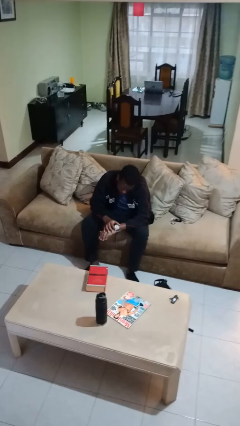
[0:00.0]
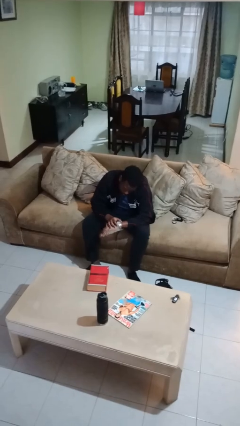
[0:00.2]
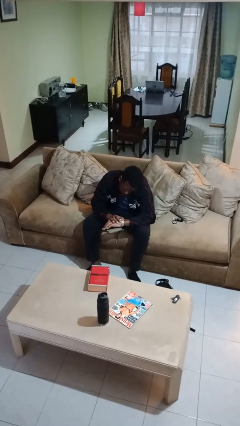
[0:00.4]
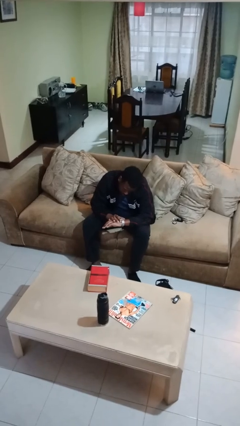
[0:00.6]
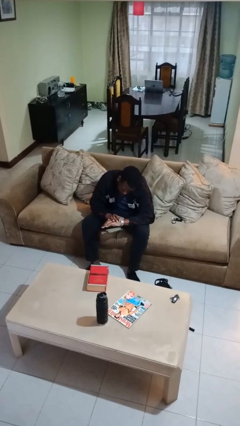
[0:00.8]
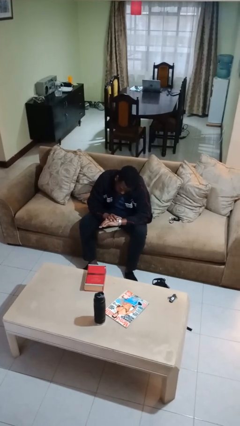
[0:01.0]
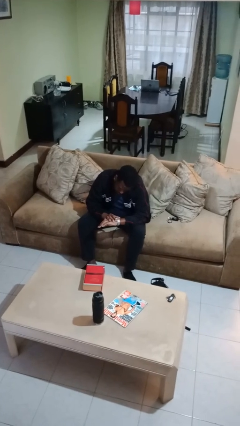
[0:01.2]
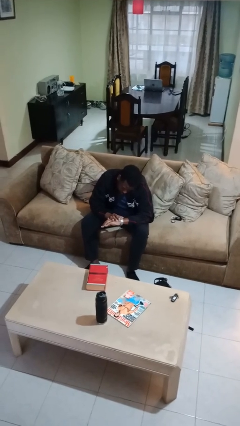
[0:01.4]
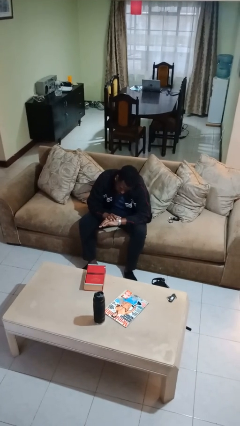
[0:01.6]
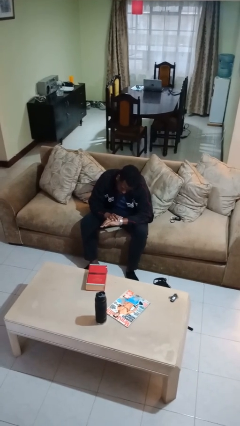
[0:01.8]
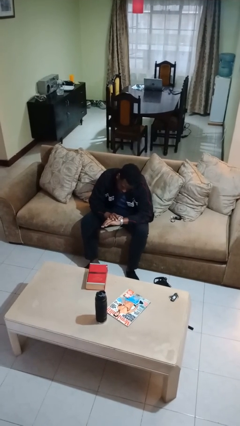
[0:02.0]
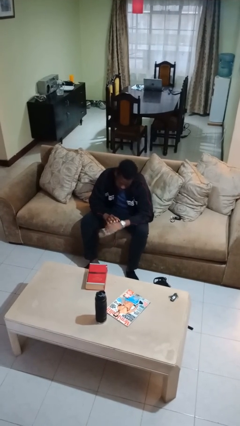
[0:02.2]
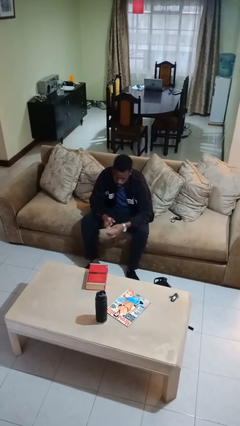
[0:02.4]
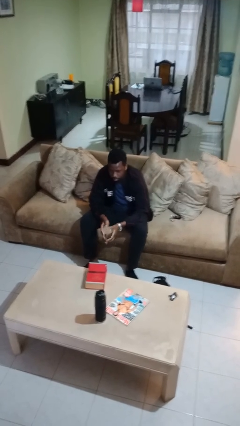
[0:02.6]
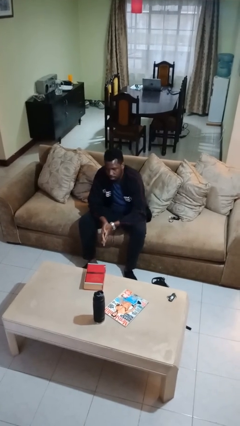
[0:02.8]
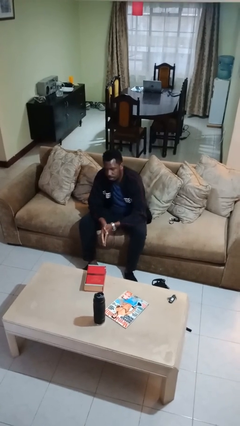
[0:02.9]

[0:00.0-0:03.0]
person looks at wristwatch

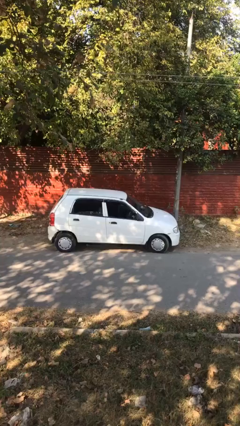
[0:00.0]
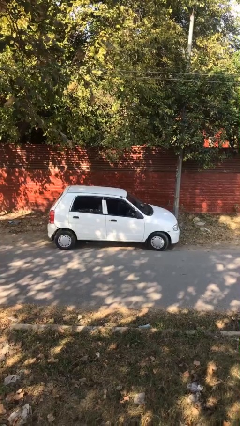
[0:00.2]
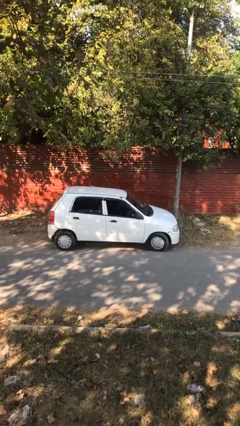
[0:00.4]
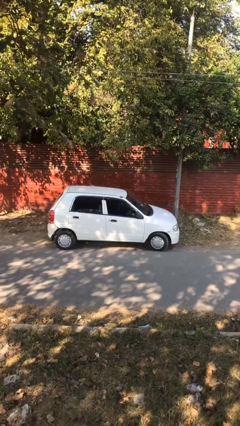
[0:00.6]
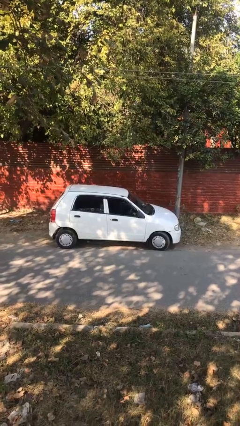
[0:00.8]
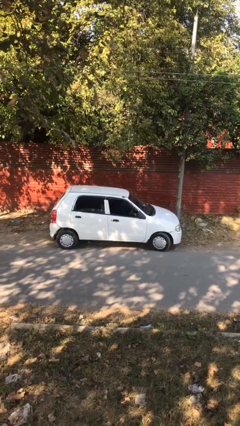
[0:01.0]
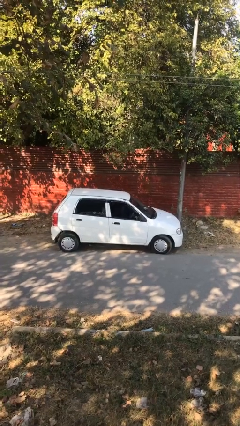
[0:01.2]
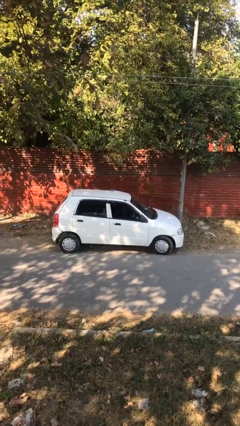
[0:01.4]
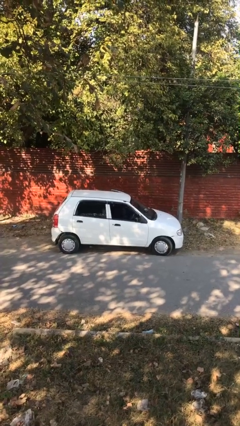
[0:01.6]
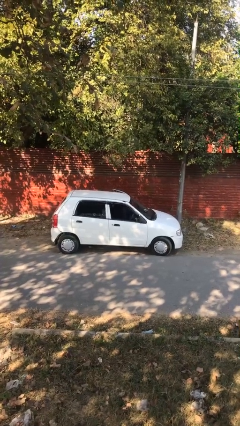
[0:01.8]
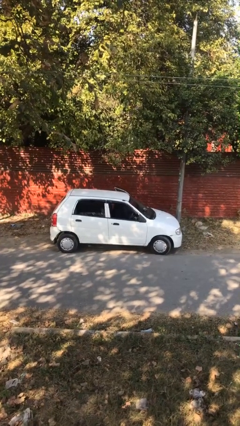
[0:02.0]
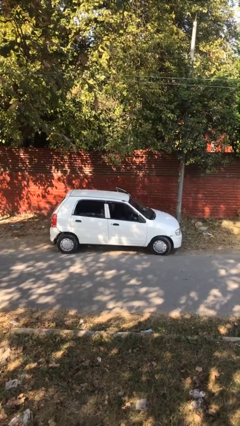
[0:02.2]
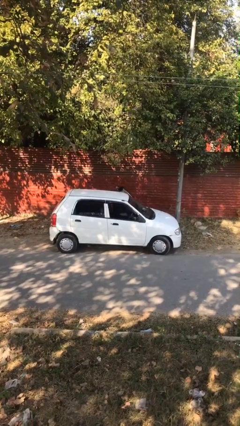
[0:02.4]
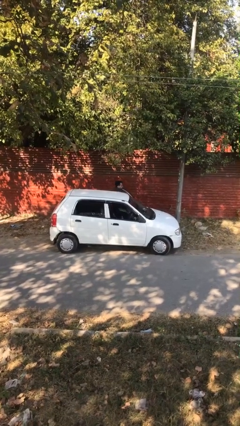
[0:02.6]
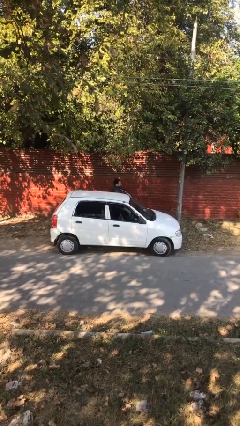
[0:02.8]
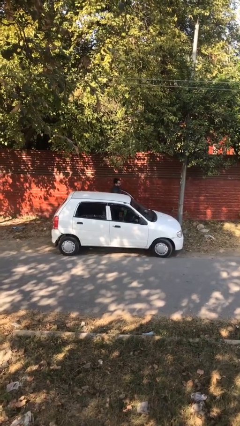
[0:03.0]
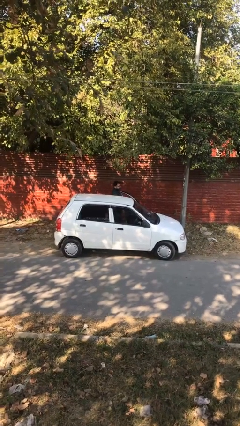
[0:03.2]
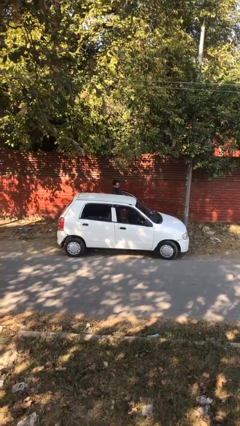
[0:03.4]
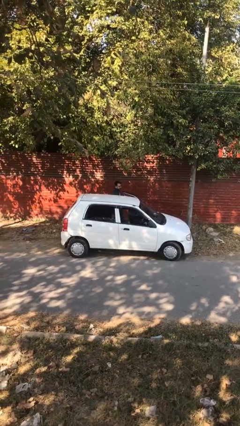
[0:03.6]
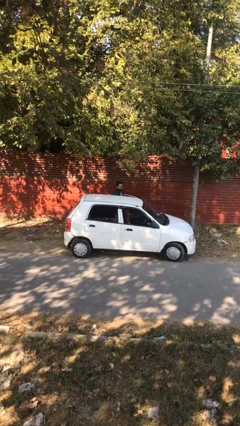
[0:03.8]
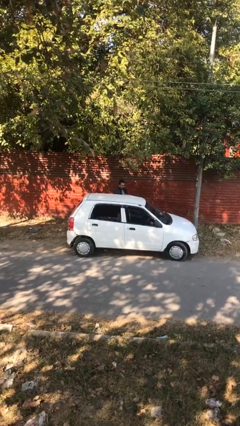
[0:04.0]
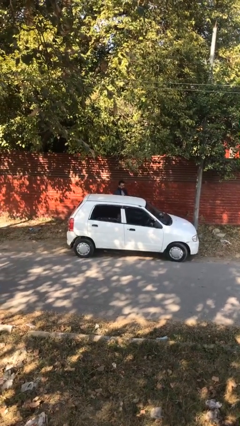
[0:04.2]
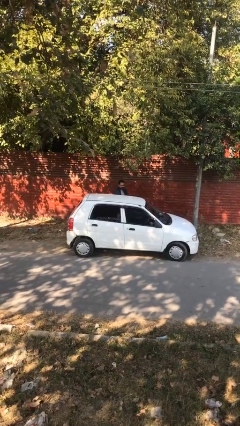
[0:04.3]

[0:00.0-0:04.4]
person exits car

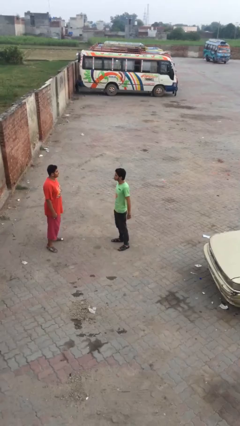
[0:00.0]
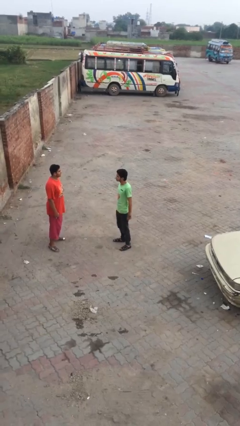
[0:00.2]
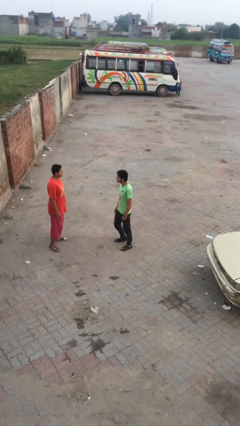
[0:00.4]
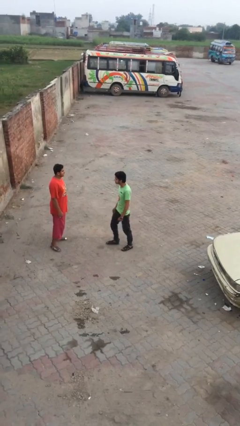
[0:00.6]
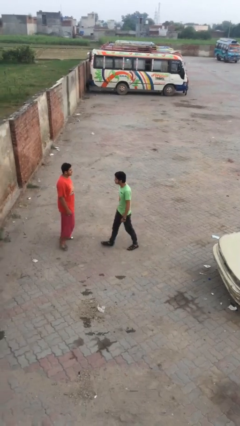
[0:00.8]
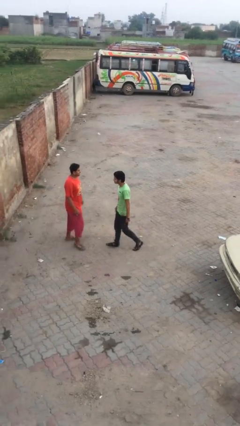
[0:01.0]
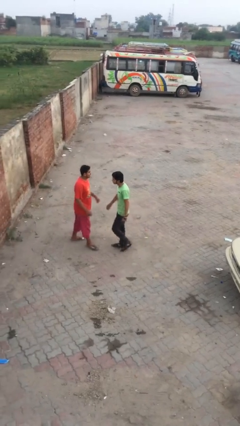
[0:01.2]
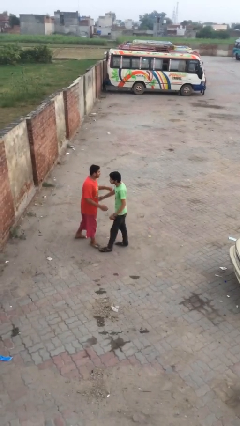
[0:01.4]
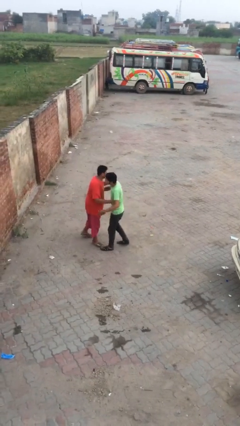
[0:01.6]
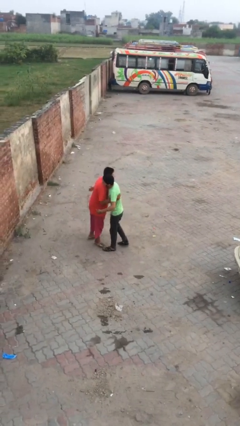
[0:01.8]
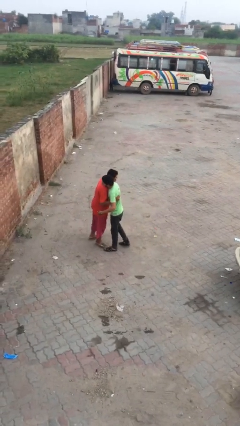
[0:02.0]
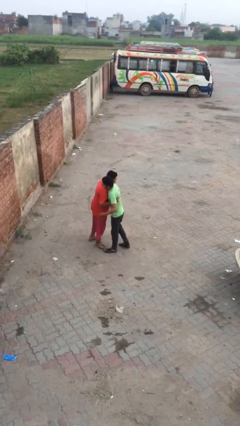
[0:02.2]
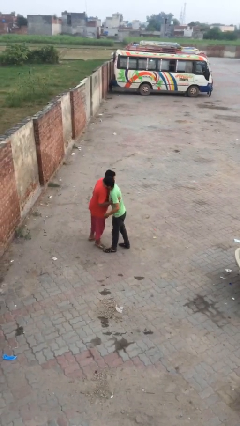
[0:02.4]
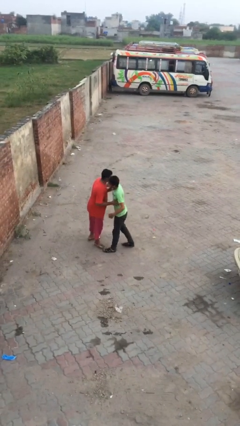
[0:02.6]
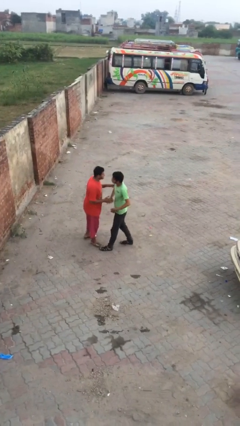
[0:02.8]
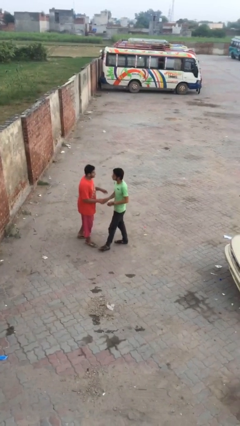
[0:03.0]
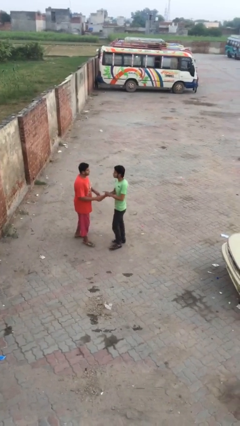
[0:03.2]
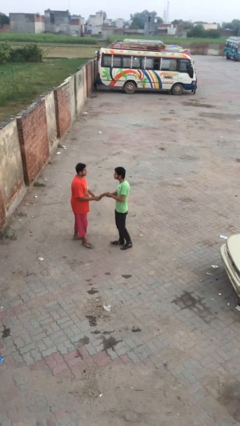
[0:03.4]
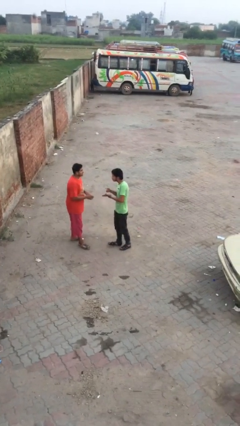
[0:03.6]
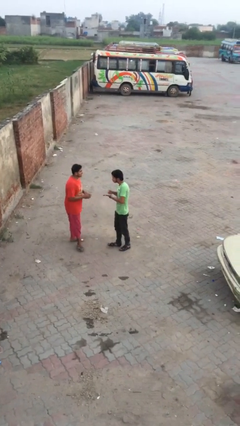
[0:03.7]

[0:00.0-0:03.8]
person embraces person

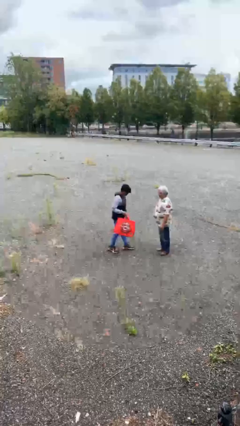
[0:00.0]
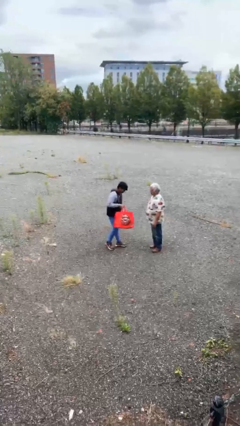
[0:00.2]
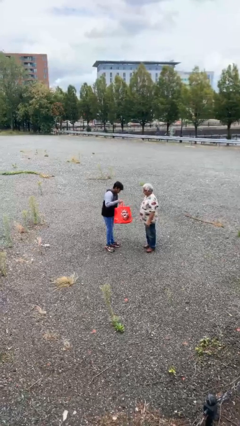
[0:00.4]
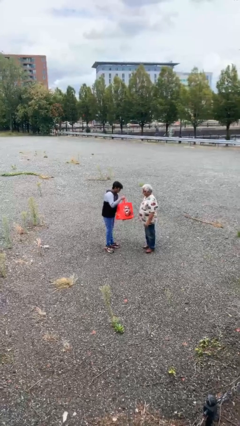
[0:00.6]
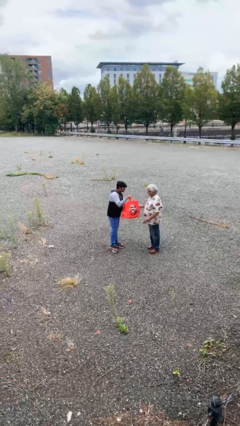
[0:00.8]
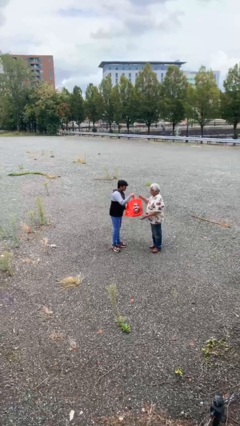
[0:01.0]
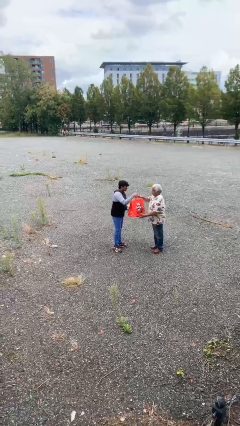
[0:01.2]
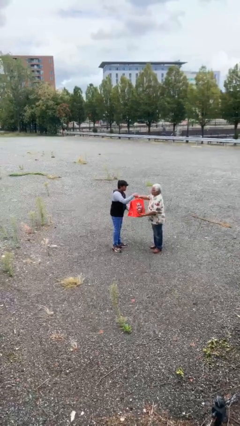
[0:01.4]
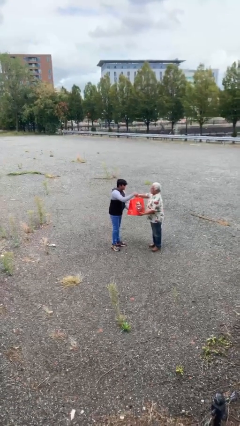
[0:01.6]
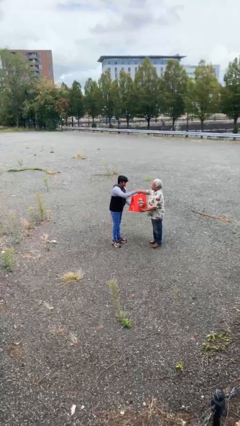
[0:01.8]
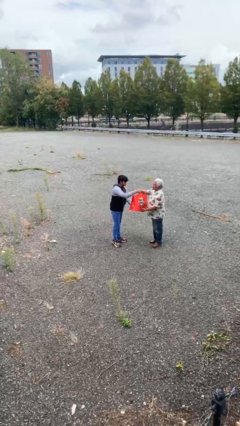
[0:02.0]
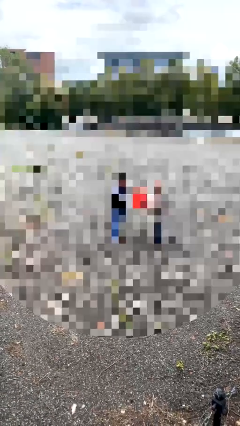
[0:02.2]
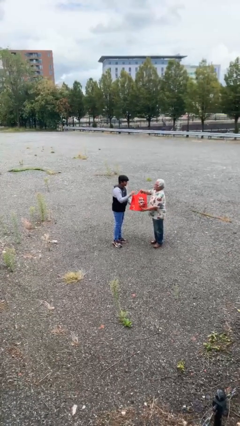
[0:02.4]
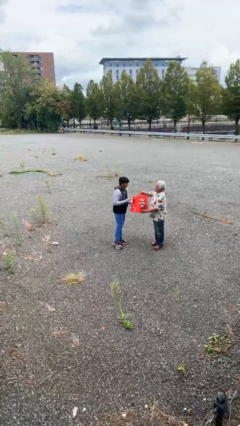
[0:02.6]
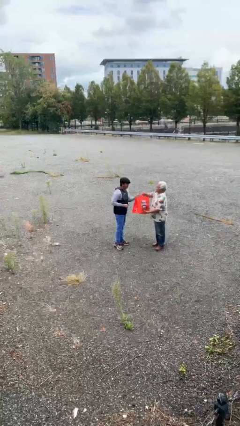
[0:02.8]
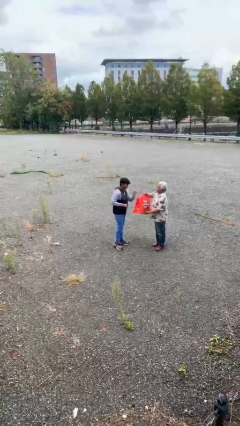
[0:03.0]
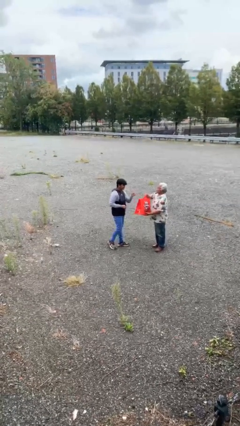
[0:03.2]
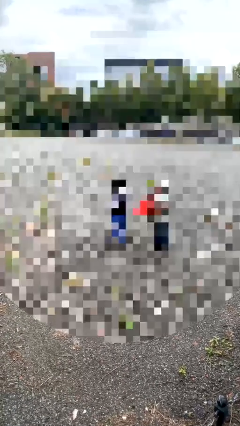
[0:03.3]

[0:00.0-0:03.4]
person transfers object to person

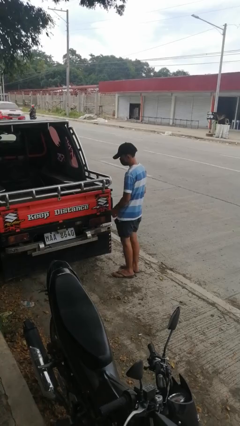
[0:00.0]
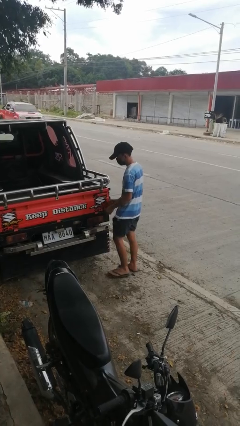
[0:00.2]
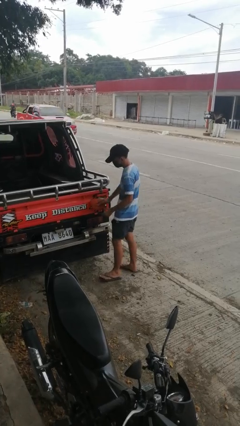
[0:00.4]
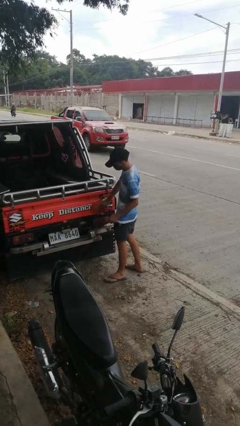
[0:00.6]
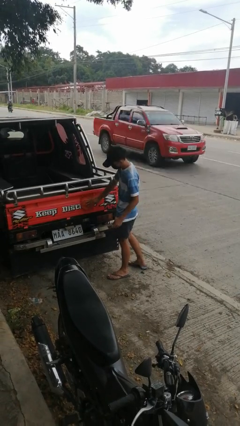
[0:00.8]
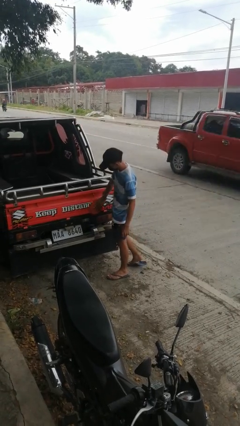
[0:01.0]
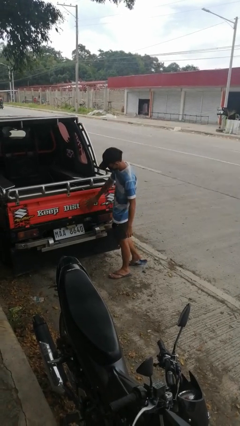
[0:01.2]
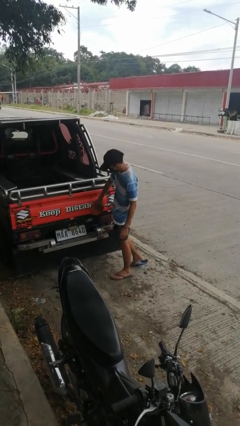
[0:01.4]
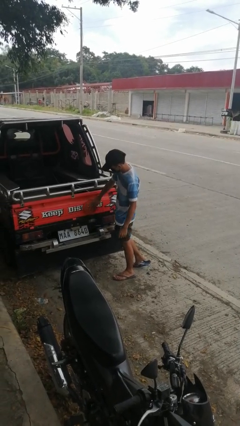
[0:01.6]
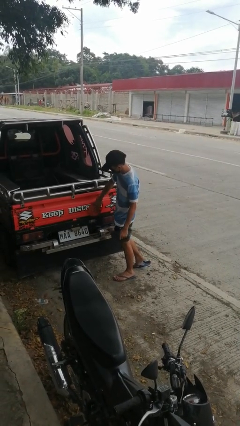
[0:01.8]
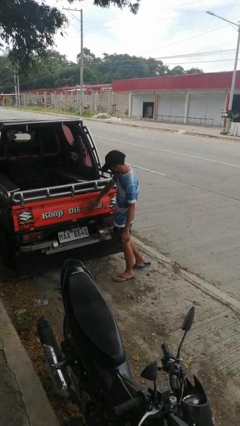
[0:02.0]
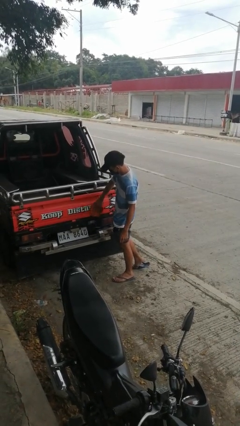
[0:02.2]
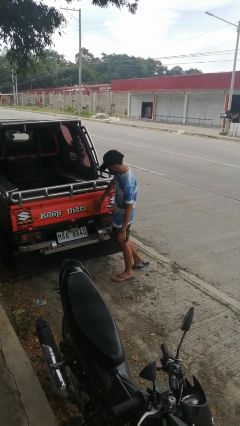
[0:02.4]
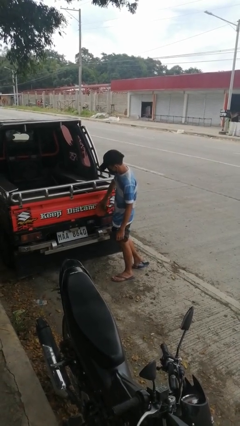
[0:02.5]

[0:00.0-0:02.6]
person polishes car with rag

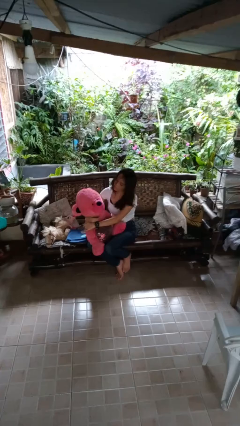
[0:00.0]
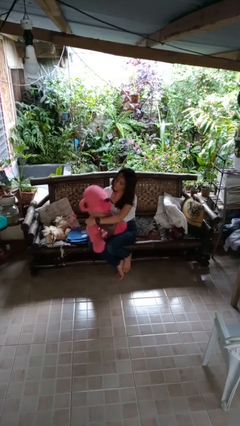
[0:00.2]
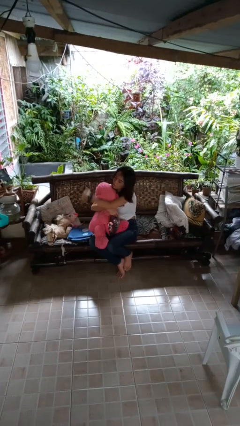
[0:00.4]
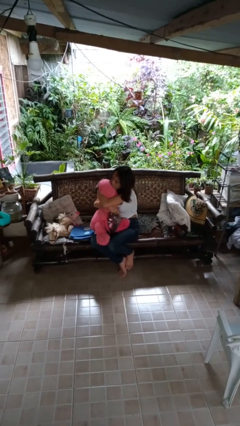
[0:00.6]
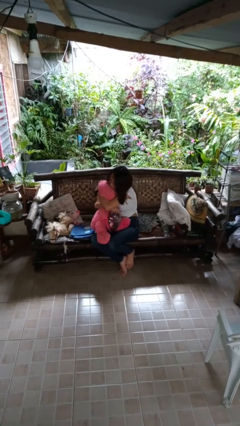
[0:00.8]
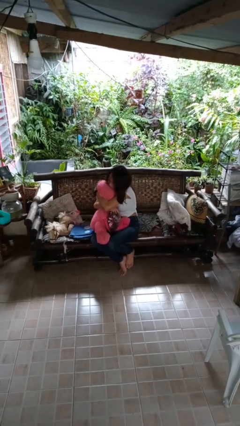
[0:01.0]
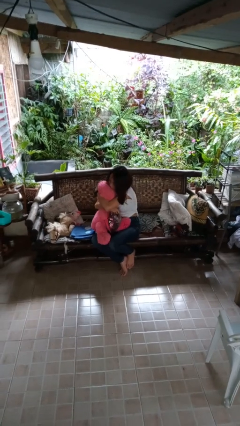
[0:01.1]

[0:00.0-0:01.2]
person hugs stuffed animal
